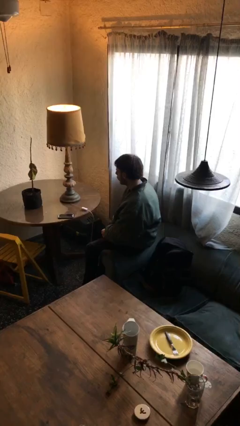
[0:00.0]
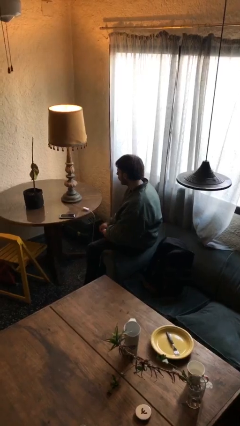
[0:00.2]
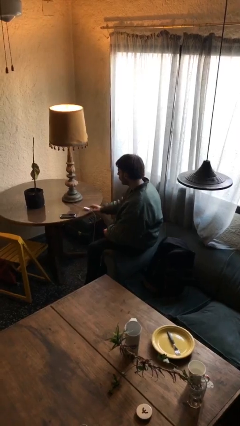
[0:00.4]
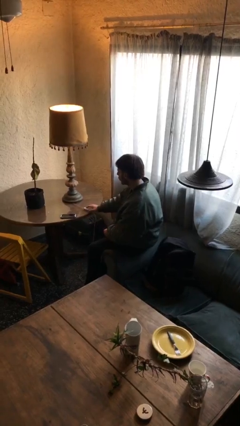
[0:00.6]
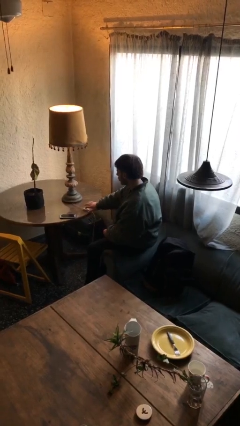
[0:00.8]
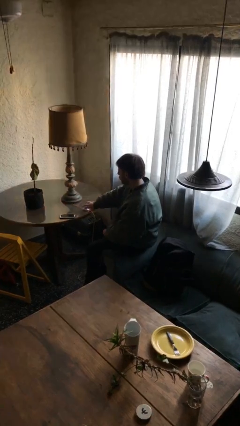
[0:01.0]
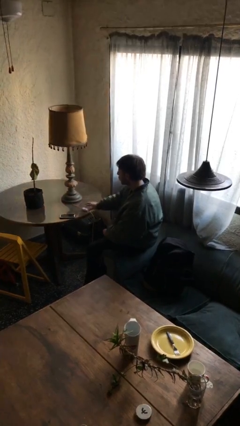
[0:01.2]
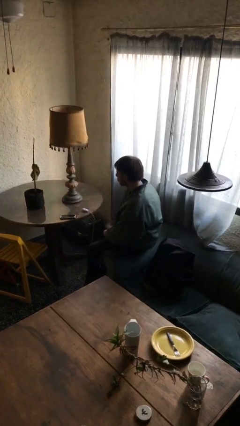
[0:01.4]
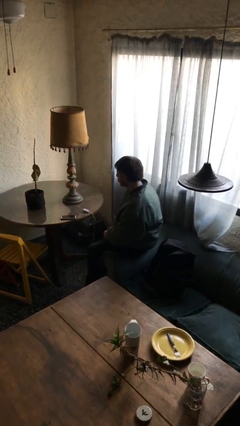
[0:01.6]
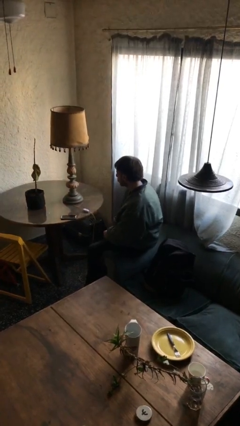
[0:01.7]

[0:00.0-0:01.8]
person turns off lamp

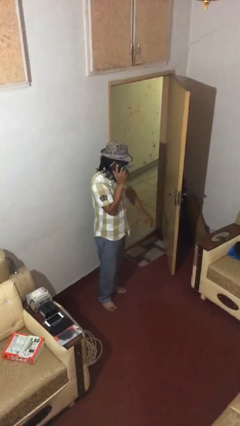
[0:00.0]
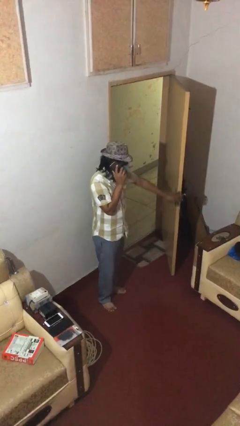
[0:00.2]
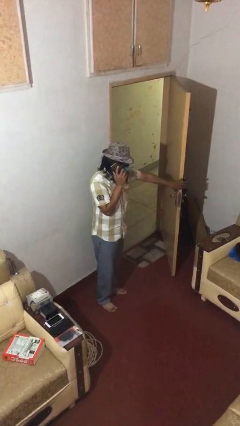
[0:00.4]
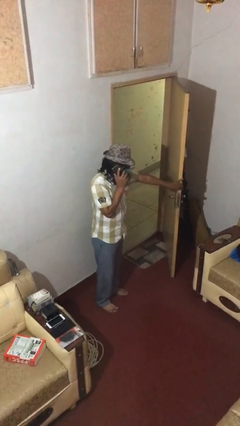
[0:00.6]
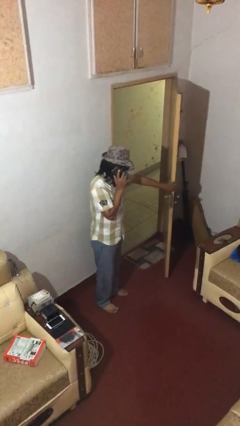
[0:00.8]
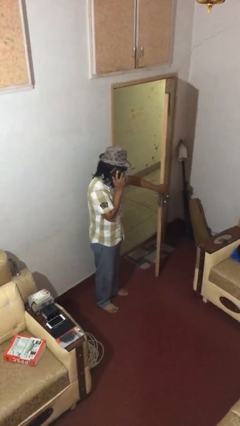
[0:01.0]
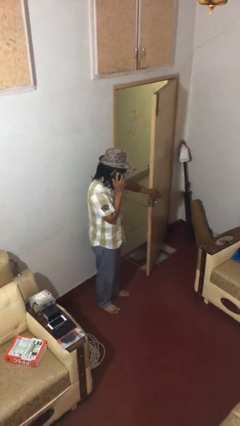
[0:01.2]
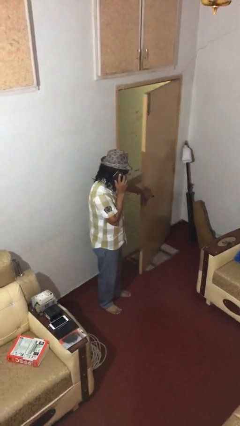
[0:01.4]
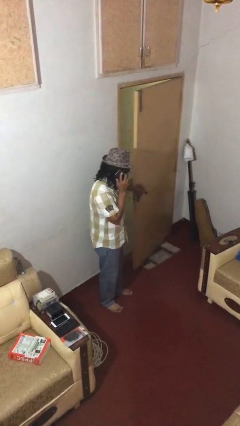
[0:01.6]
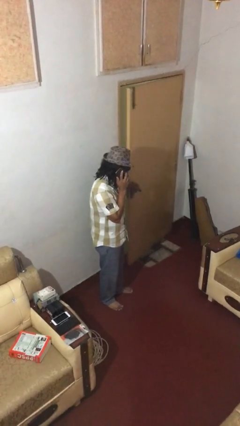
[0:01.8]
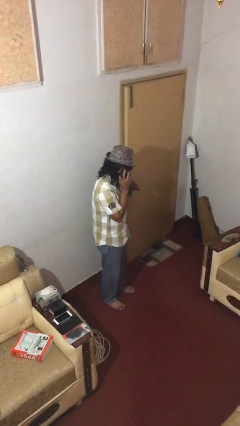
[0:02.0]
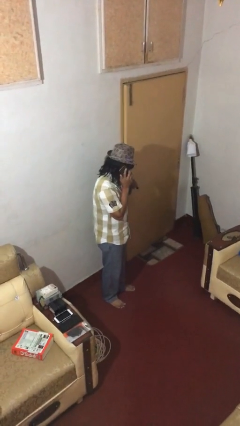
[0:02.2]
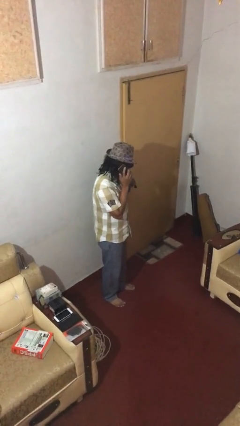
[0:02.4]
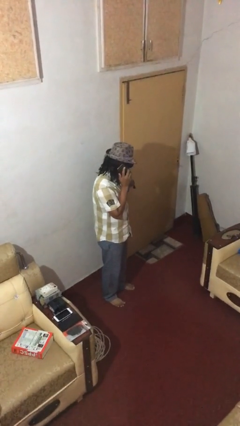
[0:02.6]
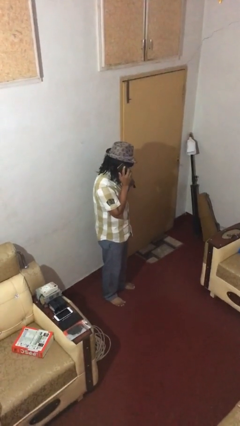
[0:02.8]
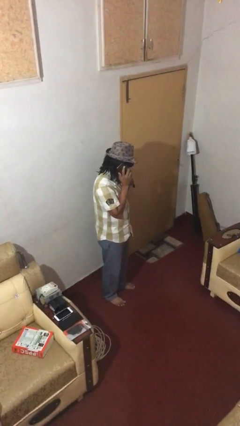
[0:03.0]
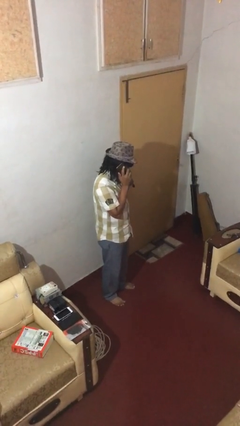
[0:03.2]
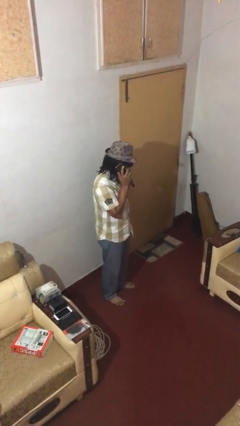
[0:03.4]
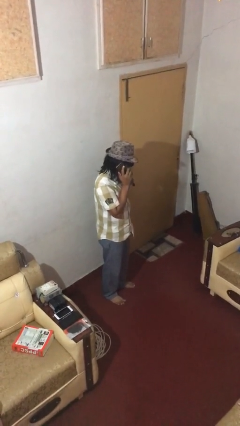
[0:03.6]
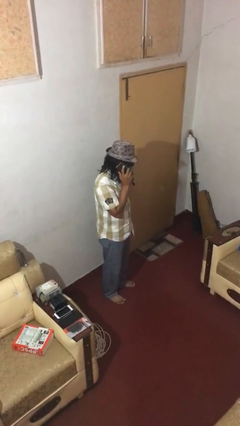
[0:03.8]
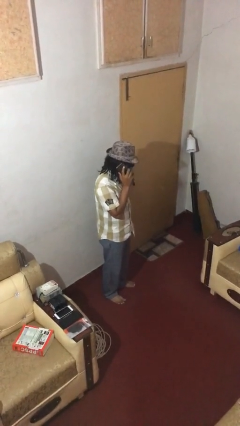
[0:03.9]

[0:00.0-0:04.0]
person closes facility door

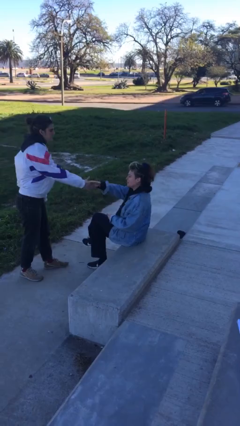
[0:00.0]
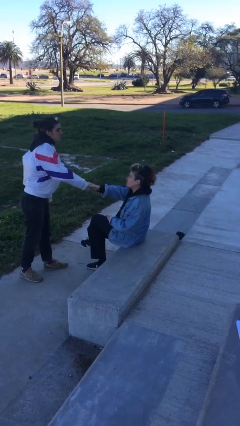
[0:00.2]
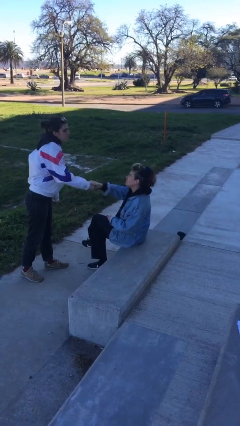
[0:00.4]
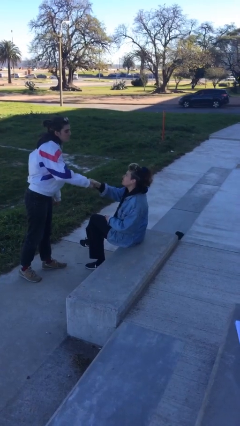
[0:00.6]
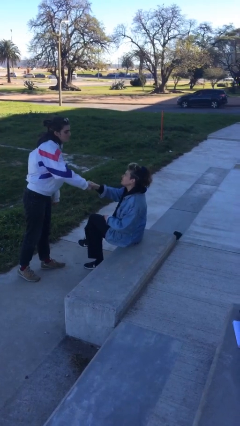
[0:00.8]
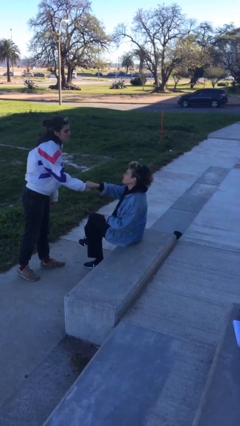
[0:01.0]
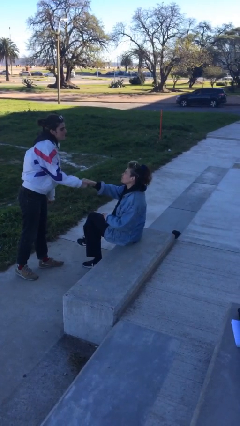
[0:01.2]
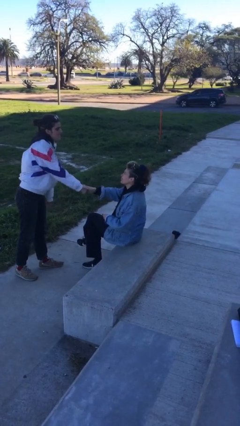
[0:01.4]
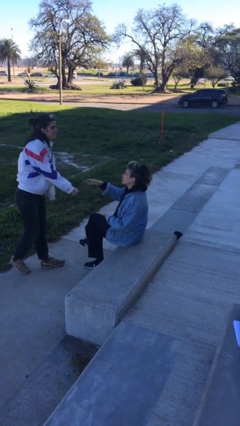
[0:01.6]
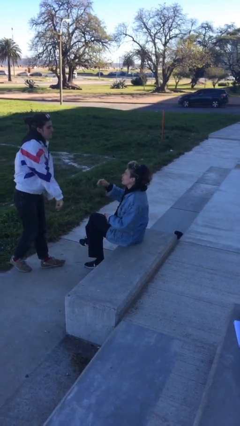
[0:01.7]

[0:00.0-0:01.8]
person shakes hand

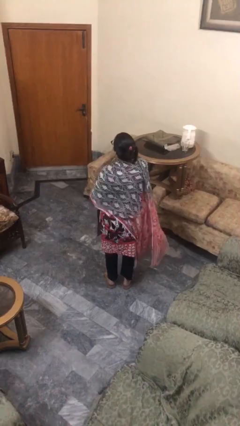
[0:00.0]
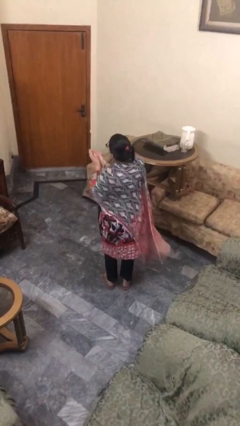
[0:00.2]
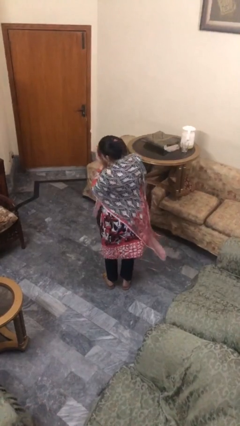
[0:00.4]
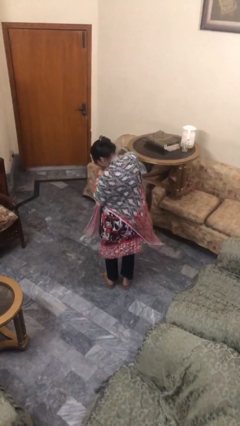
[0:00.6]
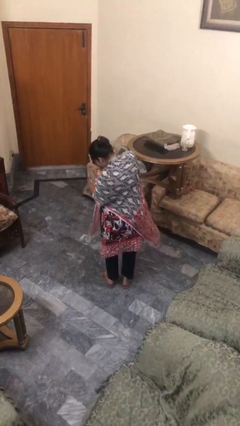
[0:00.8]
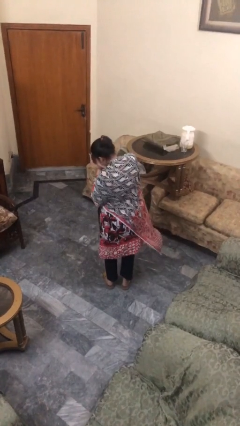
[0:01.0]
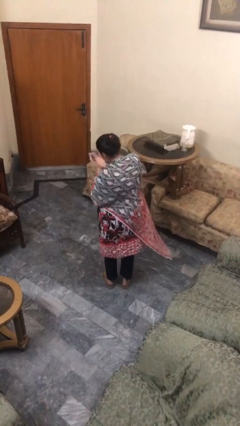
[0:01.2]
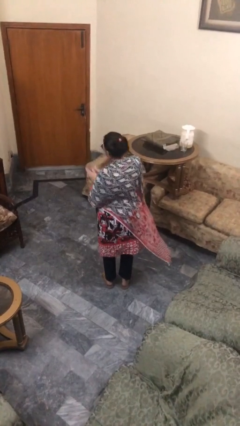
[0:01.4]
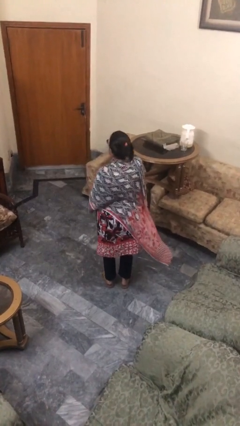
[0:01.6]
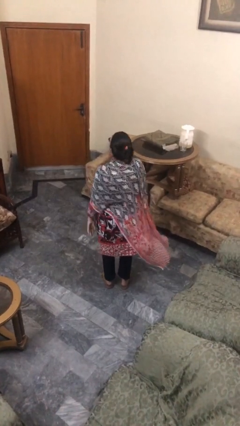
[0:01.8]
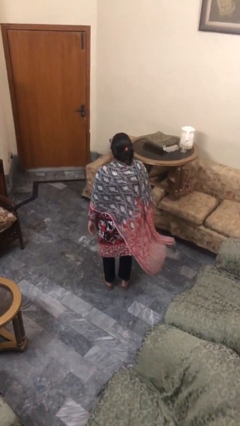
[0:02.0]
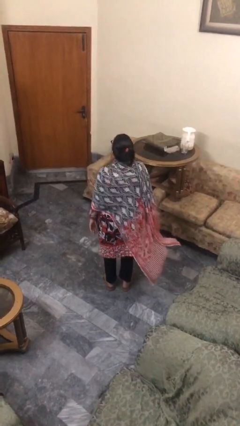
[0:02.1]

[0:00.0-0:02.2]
person sneezes into hand

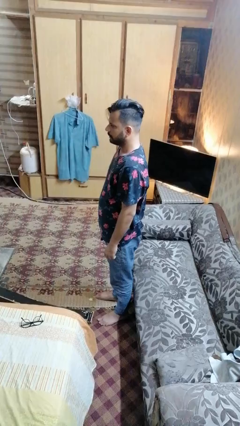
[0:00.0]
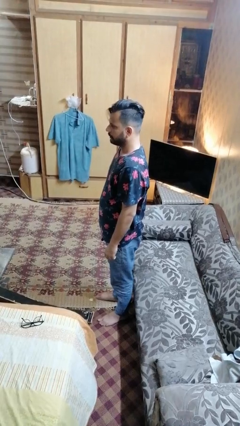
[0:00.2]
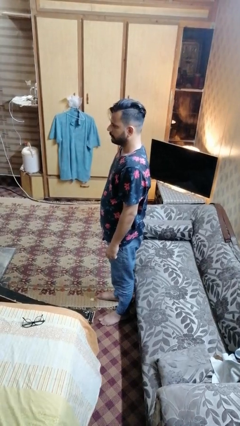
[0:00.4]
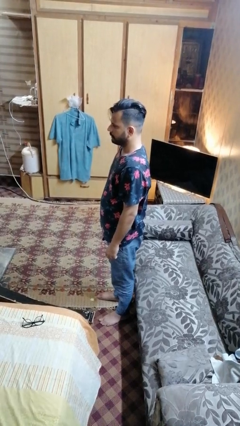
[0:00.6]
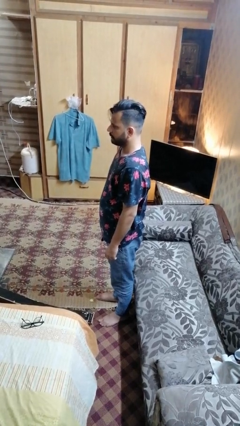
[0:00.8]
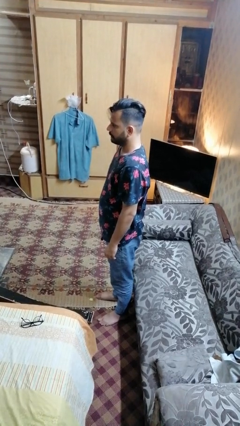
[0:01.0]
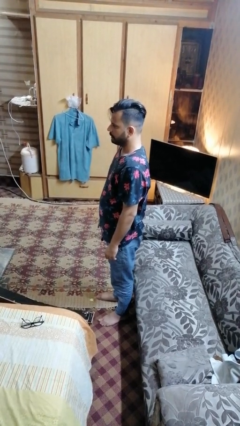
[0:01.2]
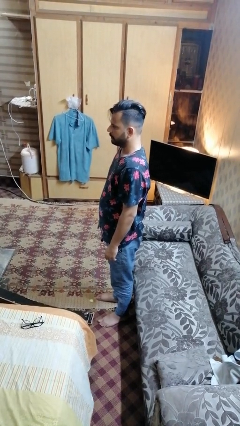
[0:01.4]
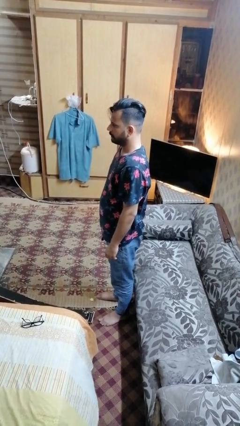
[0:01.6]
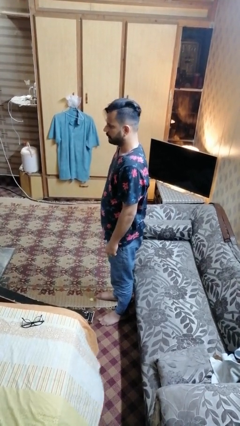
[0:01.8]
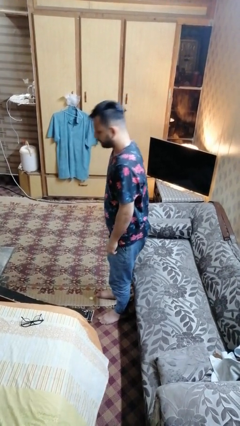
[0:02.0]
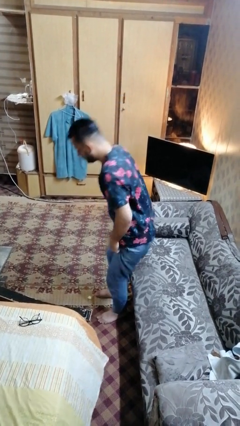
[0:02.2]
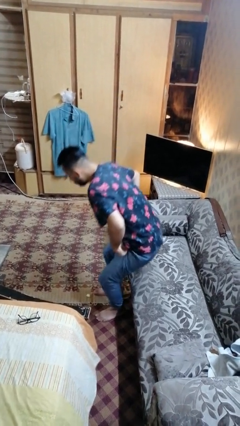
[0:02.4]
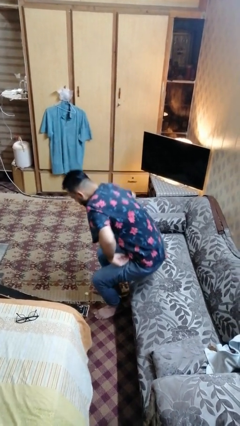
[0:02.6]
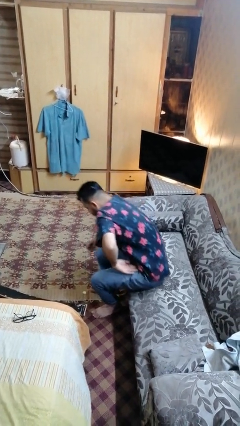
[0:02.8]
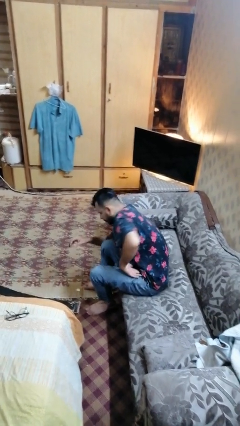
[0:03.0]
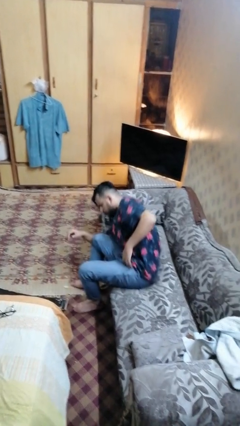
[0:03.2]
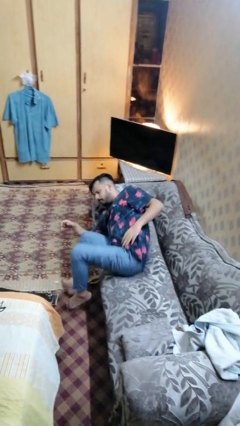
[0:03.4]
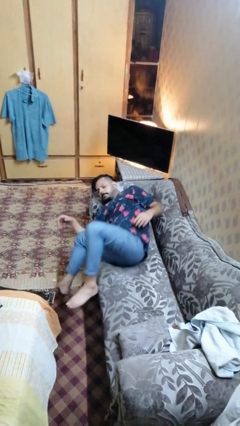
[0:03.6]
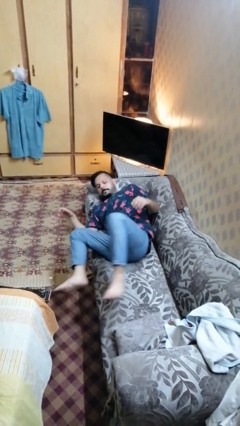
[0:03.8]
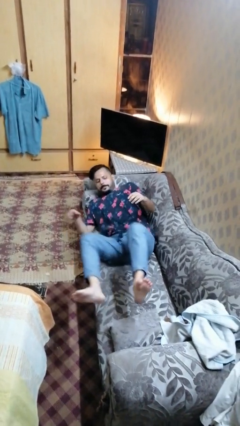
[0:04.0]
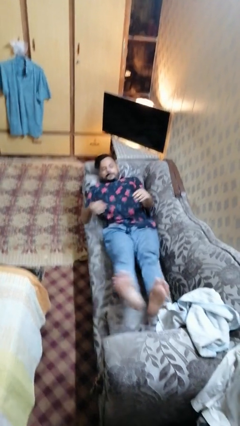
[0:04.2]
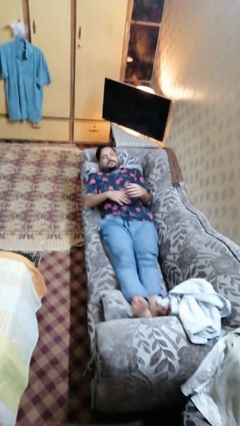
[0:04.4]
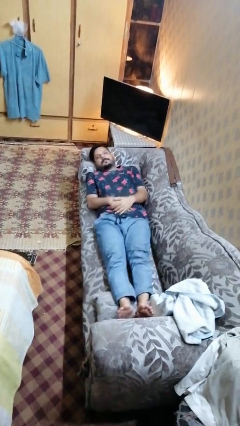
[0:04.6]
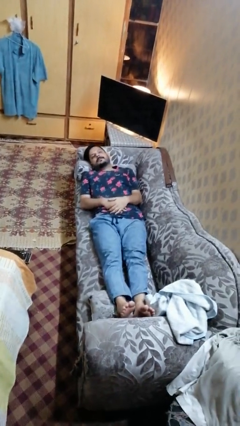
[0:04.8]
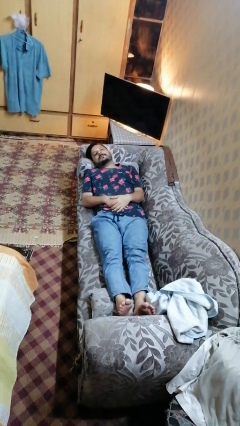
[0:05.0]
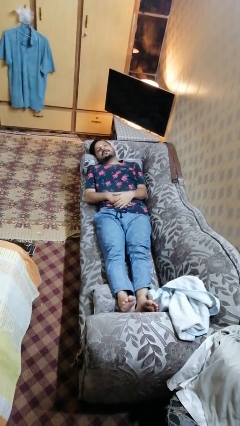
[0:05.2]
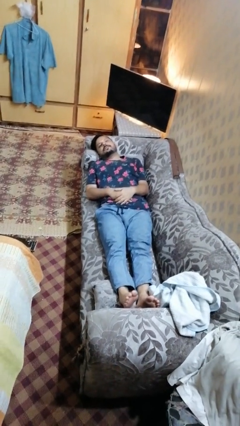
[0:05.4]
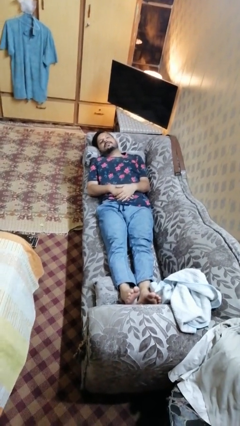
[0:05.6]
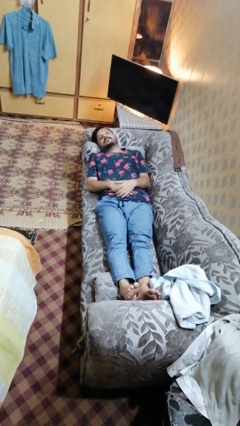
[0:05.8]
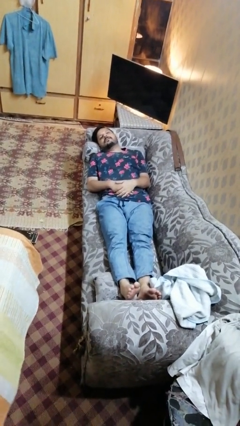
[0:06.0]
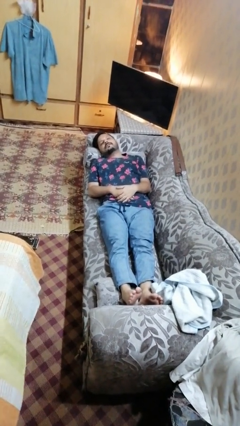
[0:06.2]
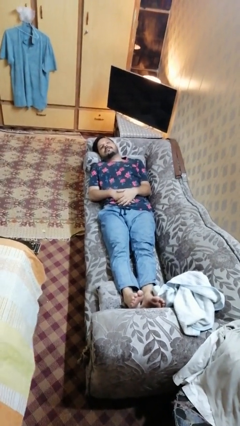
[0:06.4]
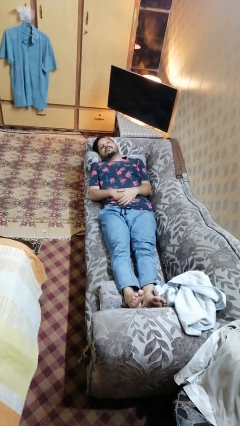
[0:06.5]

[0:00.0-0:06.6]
person lies down on couch

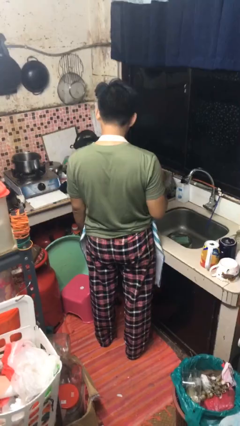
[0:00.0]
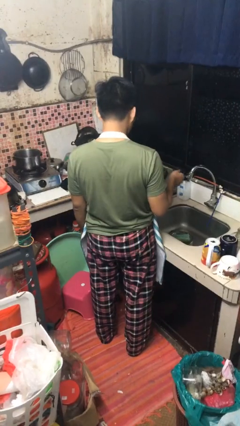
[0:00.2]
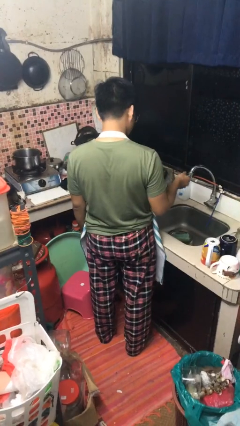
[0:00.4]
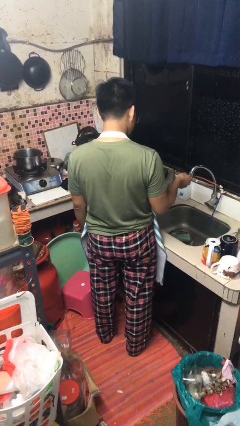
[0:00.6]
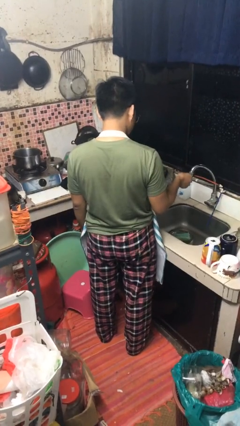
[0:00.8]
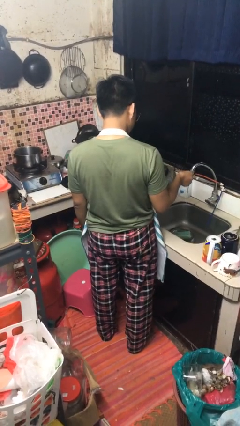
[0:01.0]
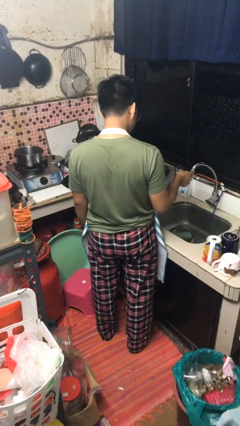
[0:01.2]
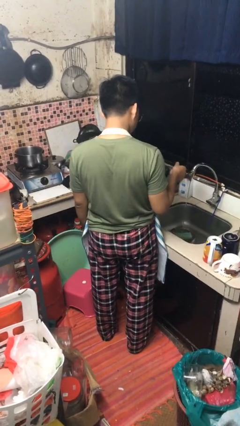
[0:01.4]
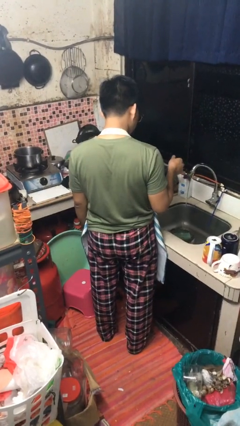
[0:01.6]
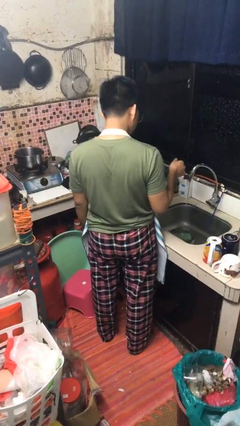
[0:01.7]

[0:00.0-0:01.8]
person turns on faucet
